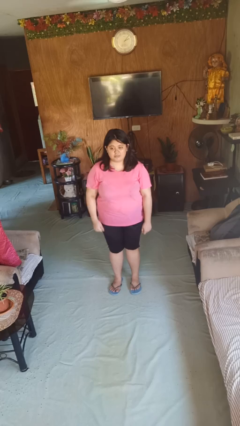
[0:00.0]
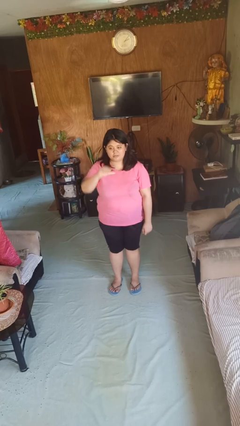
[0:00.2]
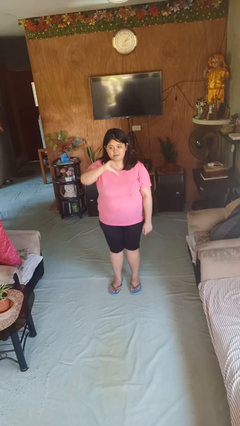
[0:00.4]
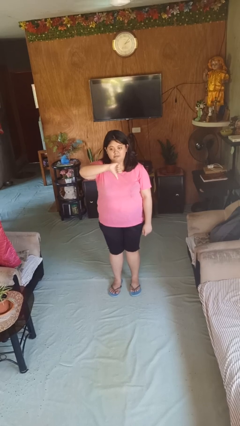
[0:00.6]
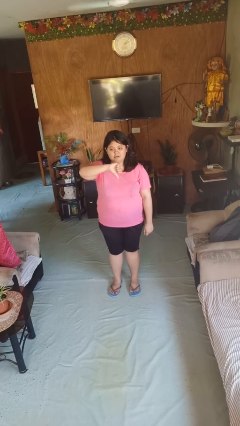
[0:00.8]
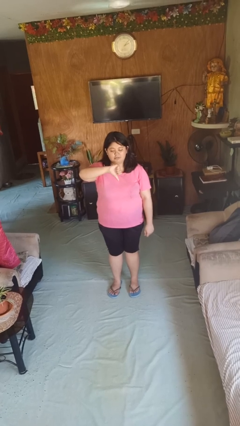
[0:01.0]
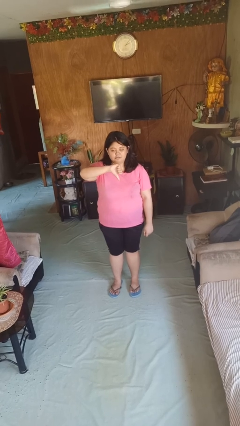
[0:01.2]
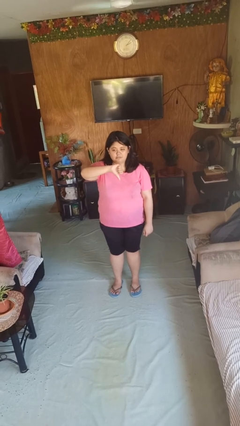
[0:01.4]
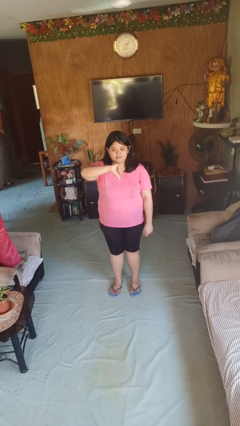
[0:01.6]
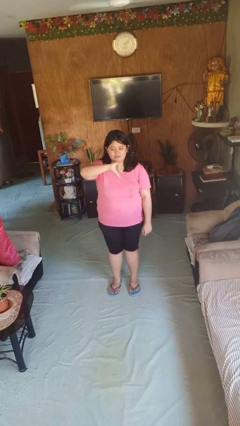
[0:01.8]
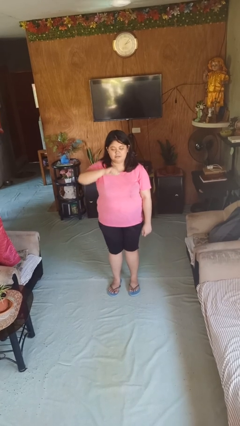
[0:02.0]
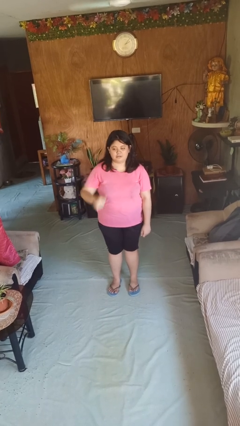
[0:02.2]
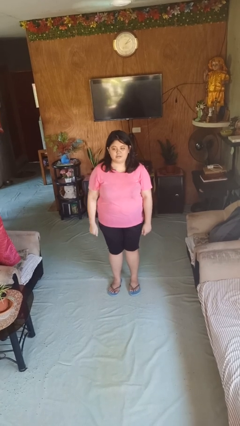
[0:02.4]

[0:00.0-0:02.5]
person gestures thumbs down

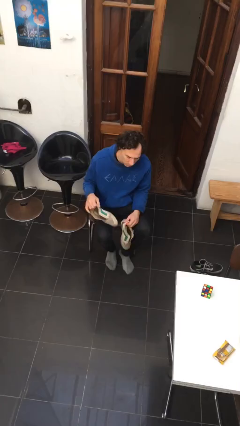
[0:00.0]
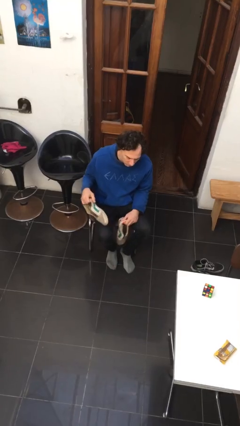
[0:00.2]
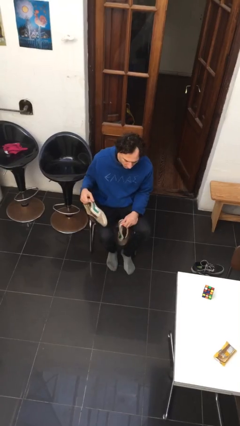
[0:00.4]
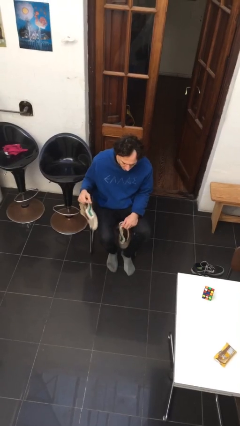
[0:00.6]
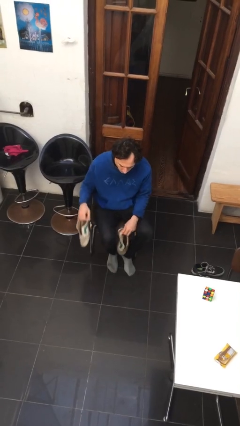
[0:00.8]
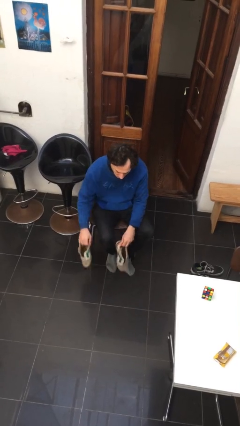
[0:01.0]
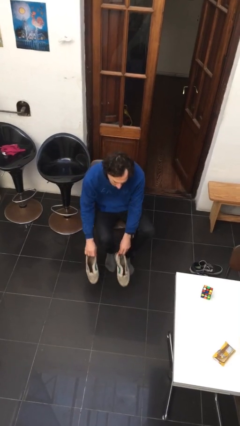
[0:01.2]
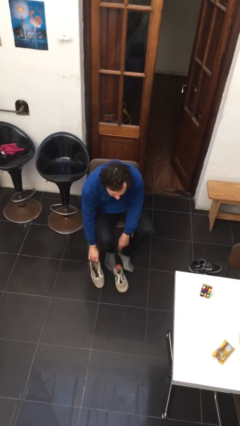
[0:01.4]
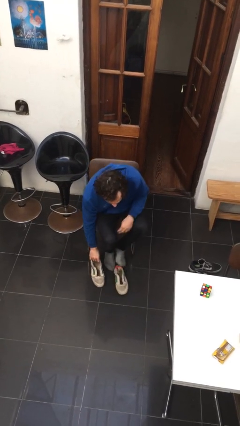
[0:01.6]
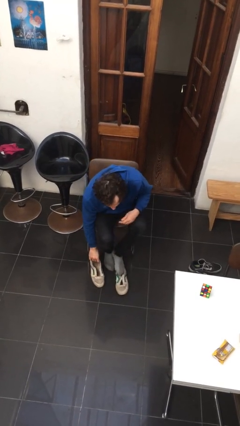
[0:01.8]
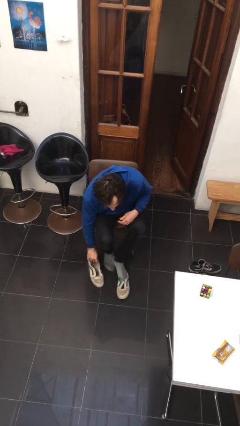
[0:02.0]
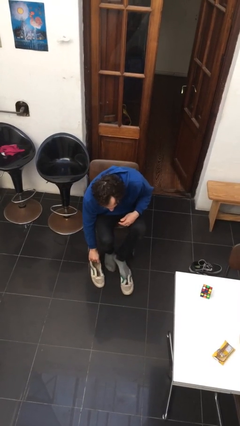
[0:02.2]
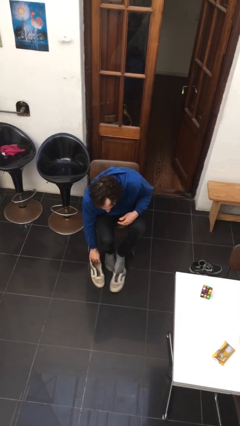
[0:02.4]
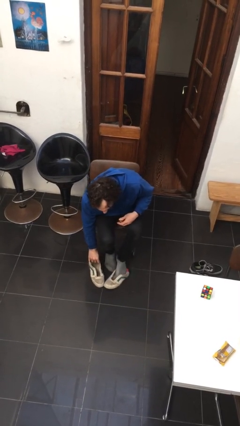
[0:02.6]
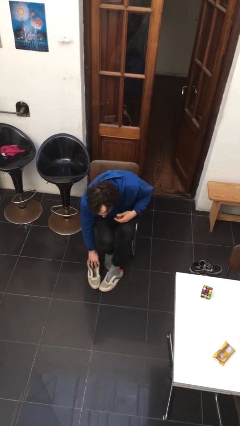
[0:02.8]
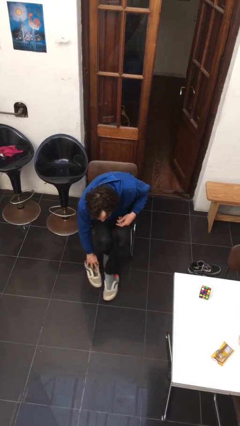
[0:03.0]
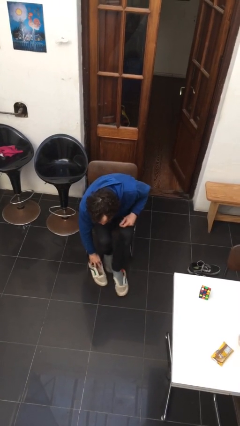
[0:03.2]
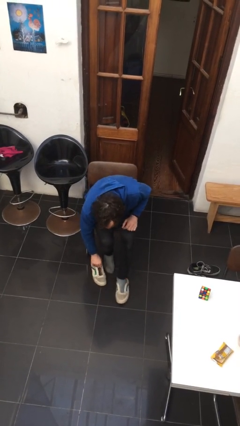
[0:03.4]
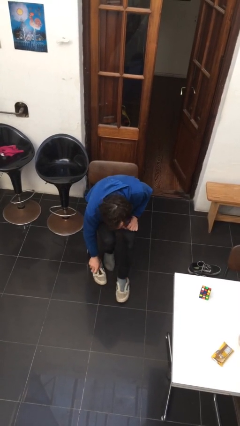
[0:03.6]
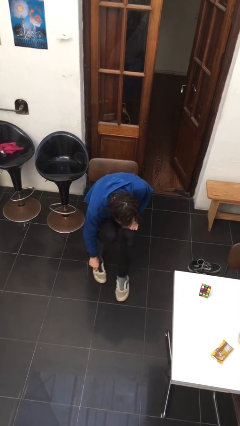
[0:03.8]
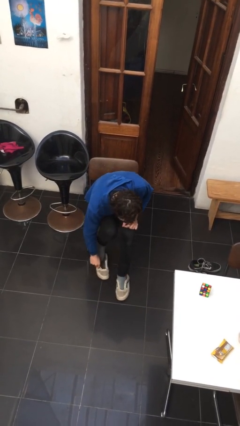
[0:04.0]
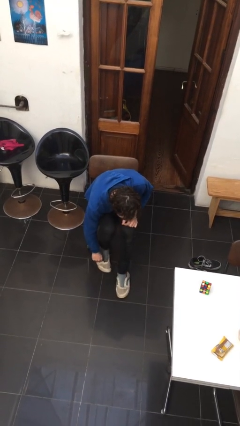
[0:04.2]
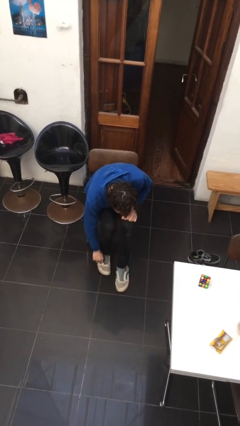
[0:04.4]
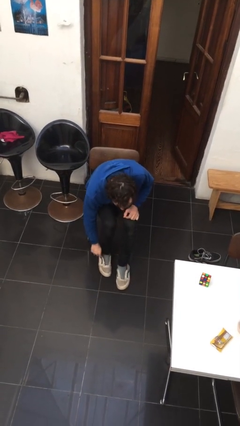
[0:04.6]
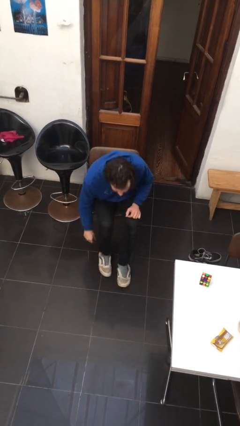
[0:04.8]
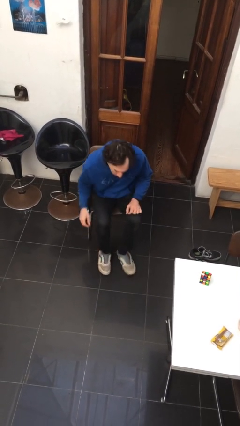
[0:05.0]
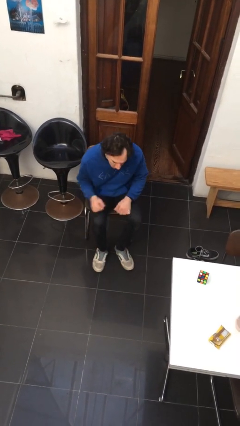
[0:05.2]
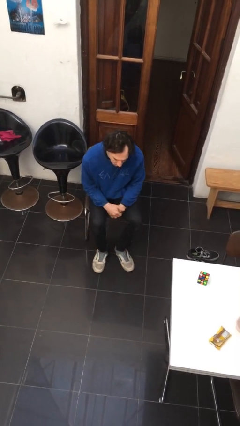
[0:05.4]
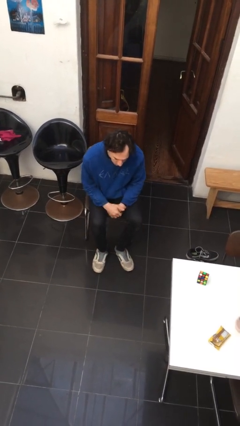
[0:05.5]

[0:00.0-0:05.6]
person puts on shoes

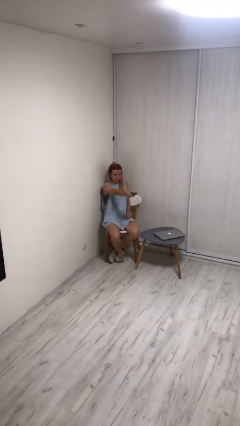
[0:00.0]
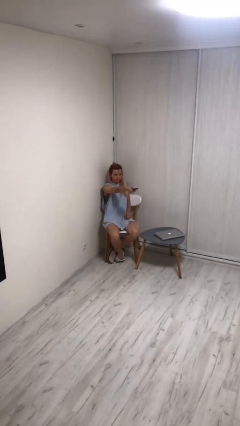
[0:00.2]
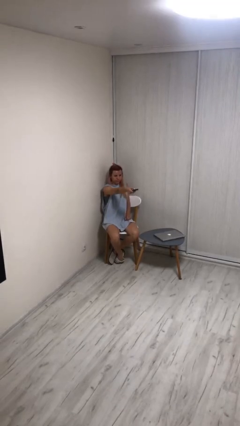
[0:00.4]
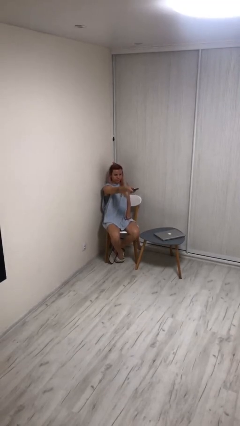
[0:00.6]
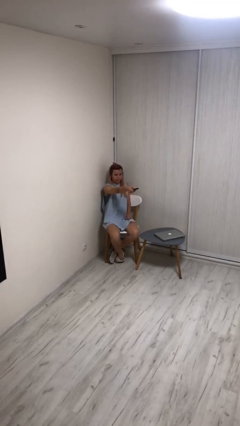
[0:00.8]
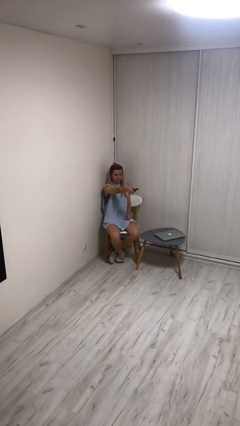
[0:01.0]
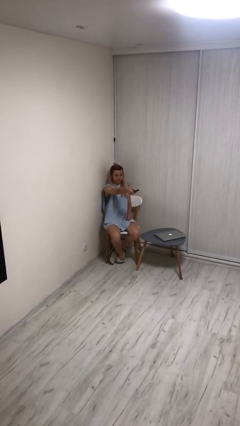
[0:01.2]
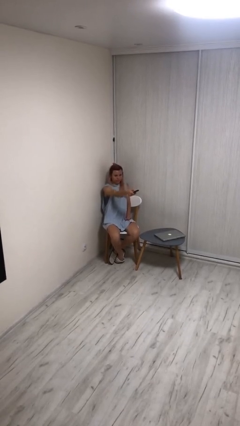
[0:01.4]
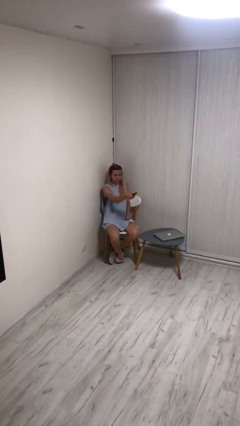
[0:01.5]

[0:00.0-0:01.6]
person uses television remote

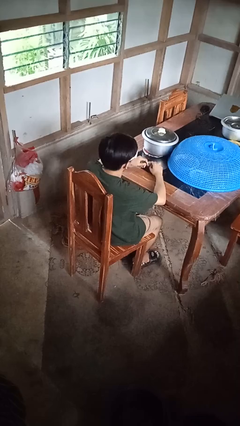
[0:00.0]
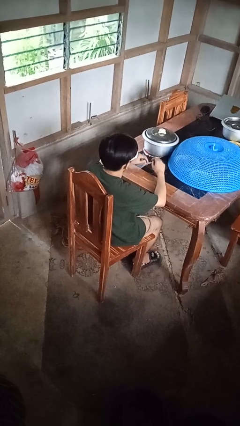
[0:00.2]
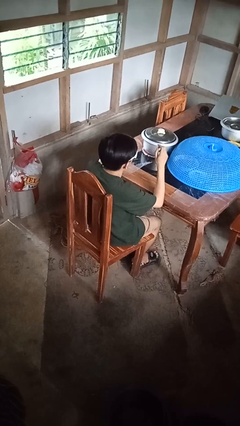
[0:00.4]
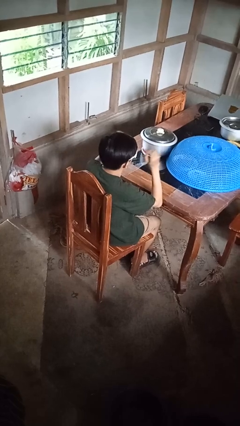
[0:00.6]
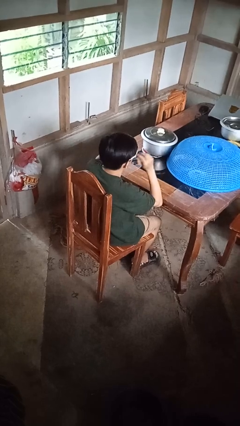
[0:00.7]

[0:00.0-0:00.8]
person takes off sunglasses

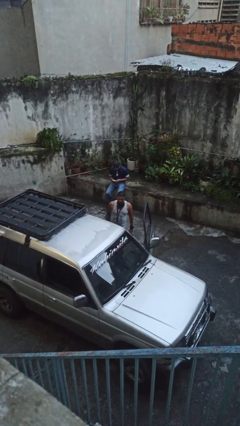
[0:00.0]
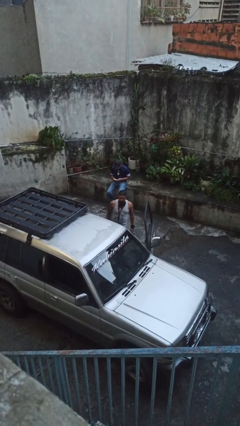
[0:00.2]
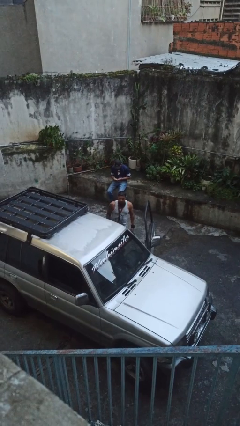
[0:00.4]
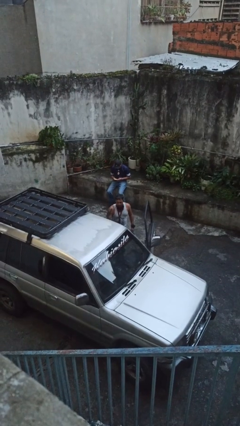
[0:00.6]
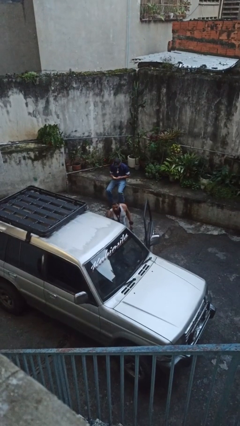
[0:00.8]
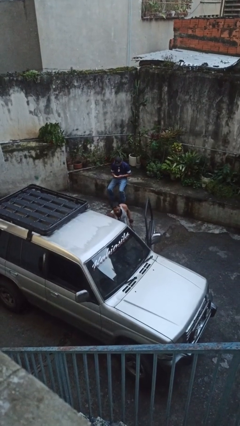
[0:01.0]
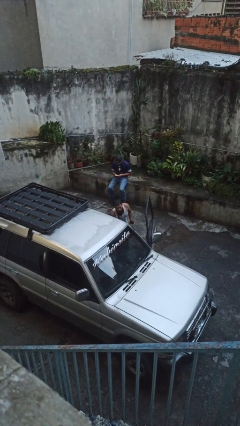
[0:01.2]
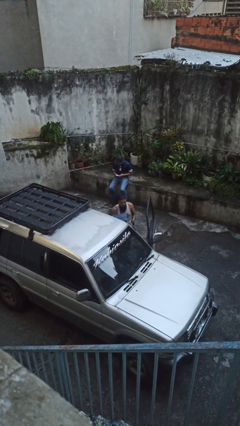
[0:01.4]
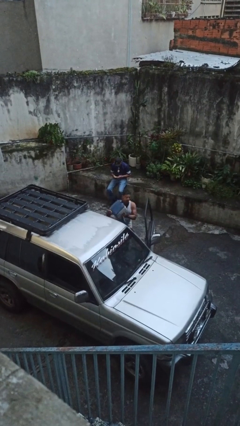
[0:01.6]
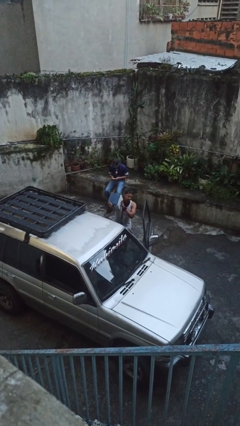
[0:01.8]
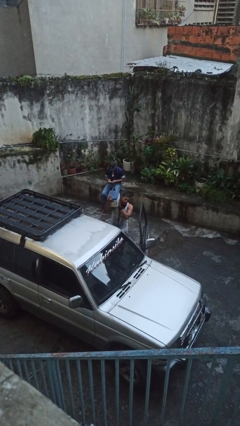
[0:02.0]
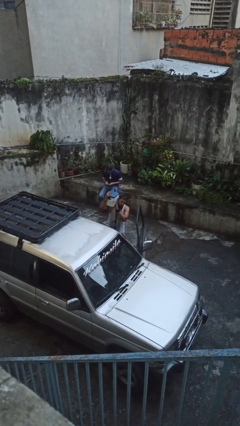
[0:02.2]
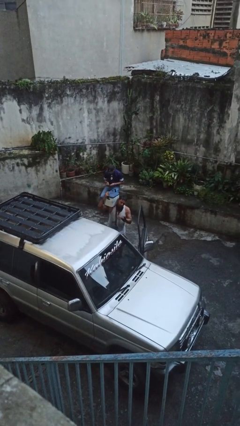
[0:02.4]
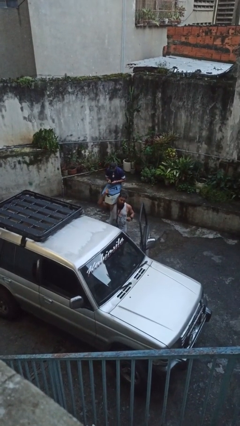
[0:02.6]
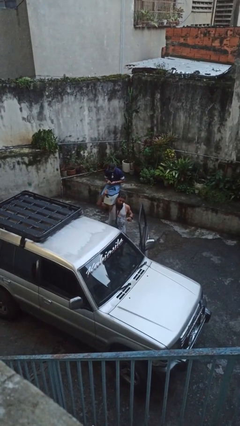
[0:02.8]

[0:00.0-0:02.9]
person unloads car

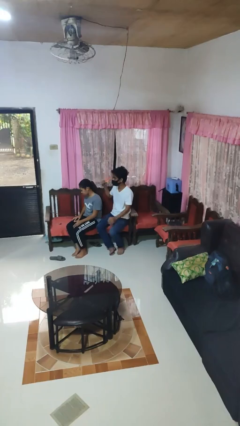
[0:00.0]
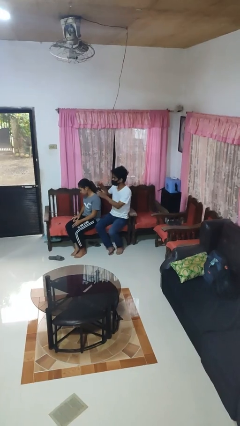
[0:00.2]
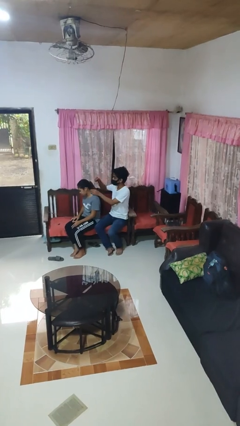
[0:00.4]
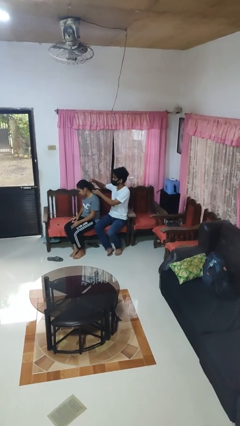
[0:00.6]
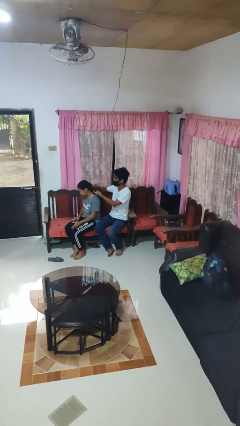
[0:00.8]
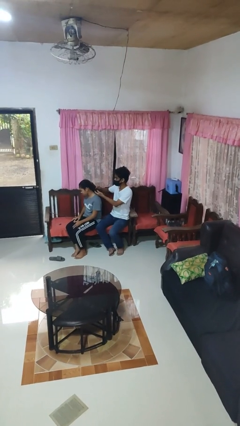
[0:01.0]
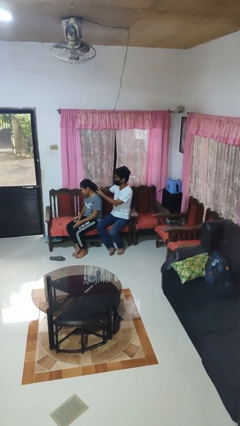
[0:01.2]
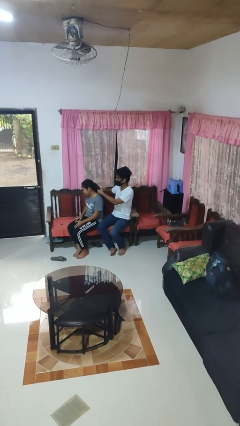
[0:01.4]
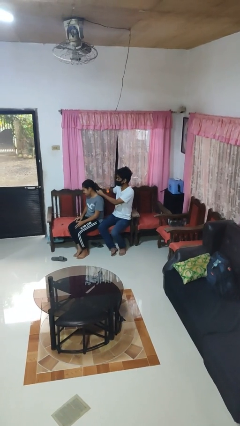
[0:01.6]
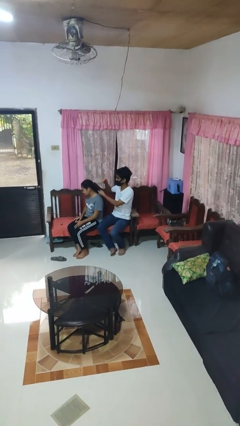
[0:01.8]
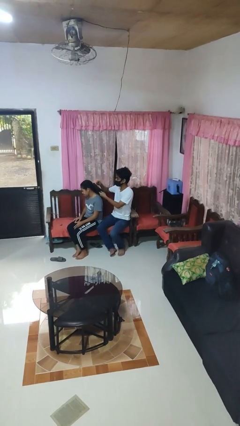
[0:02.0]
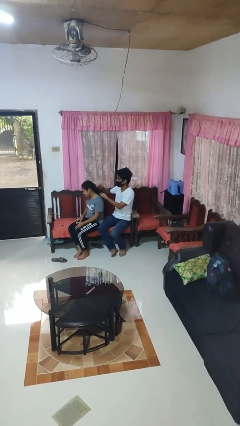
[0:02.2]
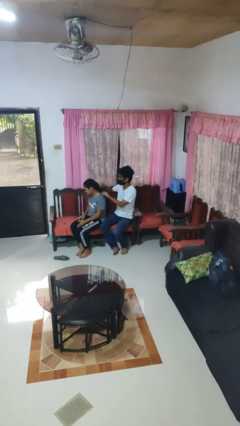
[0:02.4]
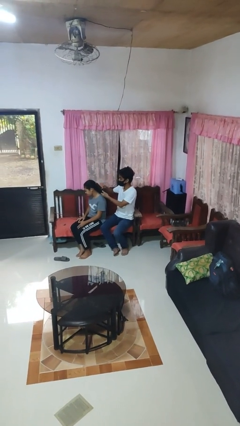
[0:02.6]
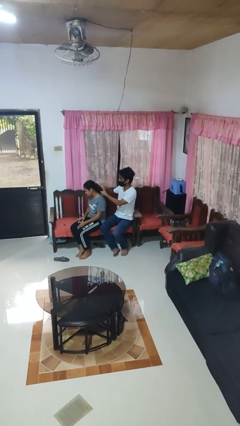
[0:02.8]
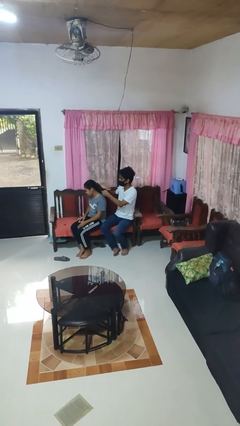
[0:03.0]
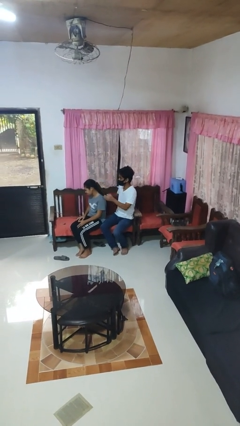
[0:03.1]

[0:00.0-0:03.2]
person brushes hair of person

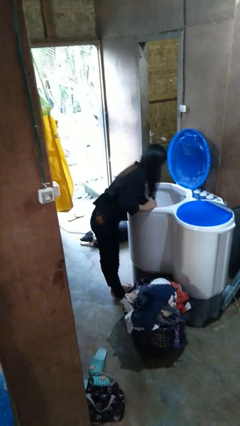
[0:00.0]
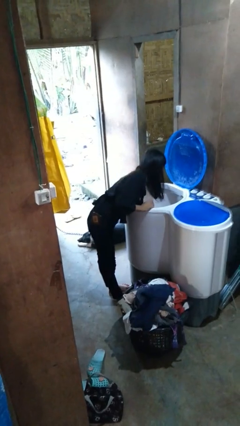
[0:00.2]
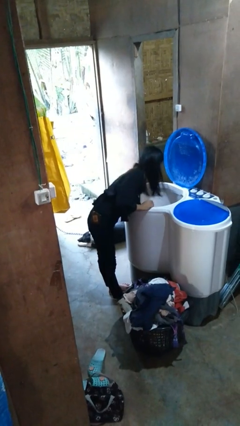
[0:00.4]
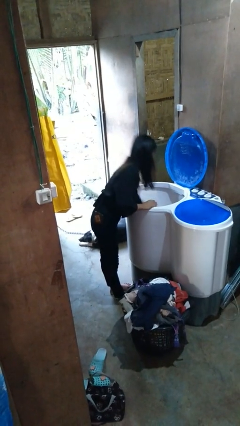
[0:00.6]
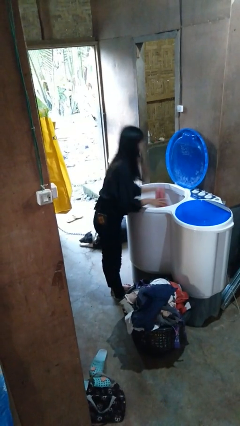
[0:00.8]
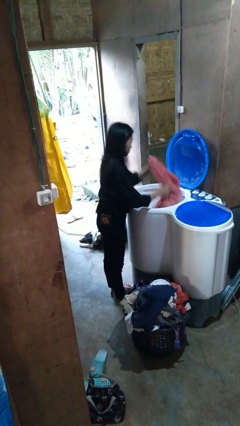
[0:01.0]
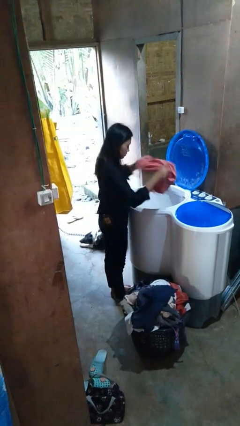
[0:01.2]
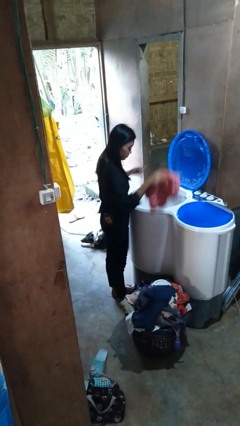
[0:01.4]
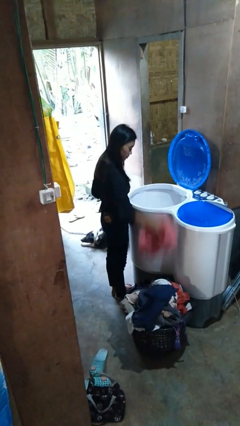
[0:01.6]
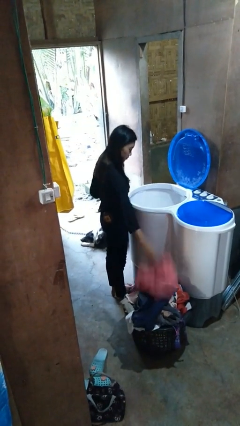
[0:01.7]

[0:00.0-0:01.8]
person unloads clotheswasher
